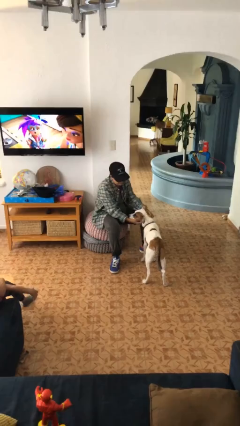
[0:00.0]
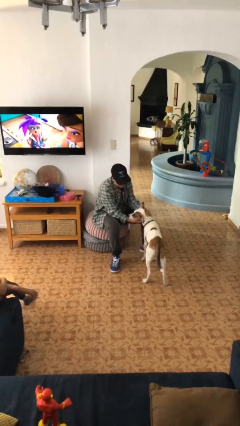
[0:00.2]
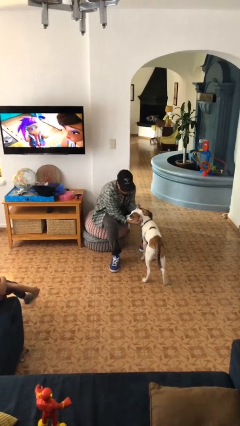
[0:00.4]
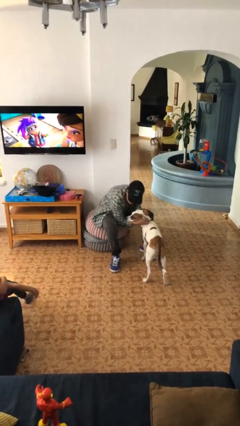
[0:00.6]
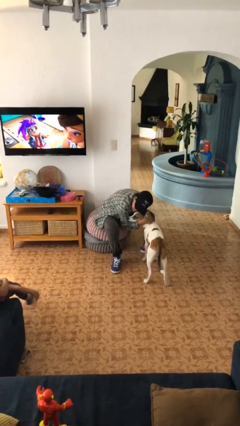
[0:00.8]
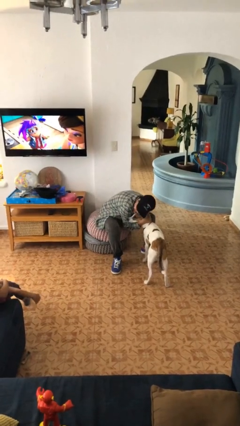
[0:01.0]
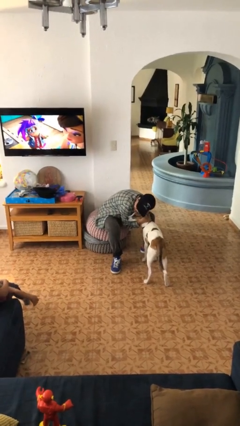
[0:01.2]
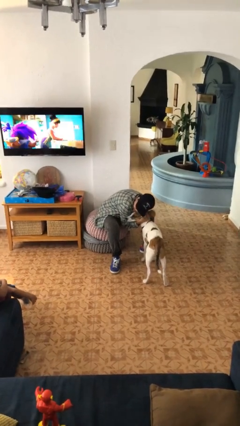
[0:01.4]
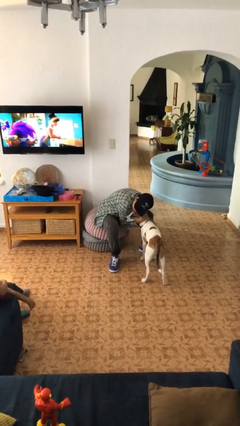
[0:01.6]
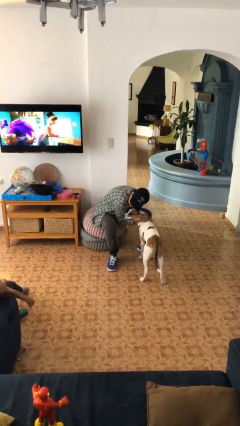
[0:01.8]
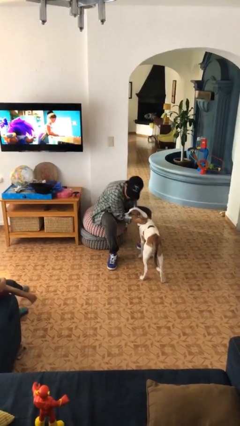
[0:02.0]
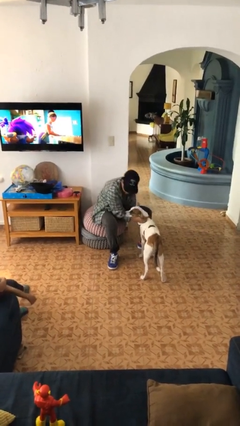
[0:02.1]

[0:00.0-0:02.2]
person hugs cat

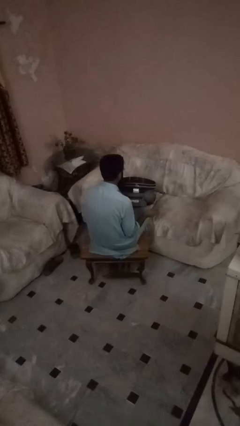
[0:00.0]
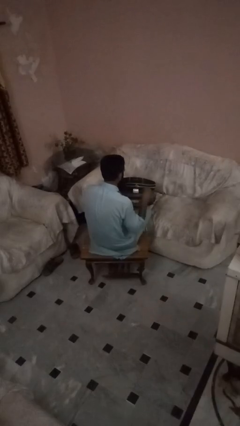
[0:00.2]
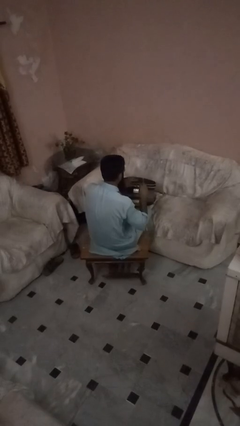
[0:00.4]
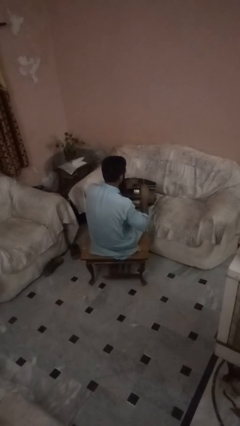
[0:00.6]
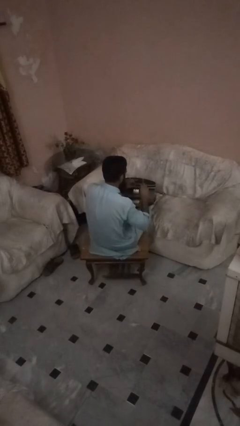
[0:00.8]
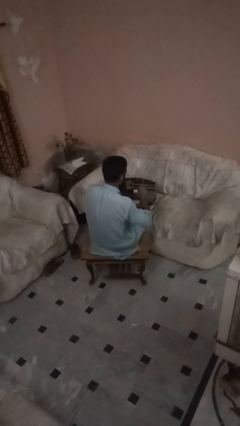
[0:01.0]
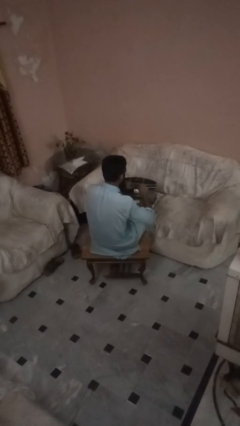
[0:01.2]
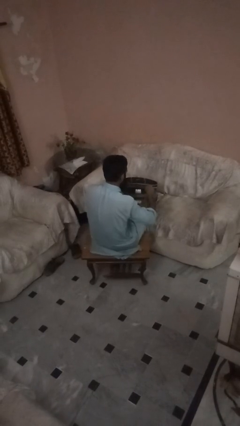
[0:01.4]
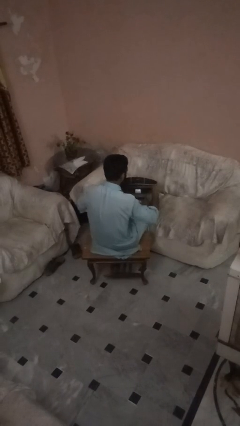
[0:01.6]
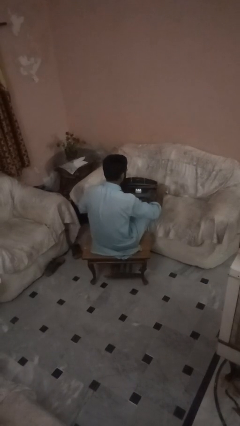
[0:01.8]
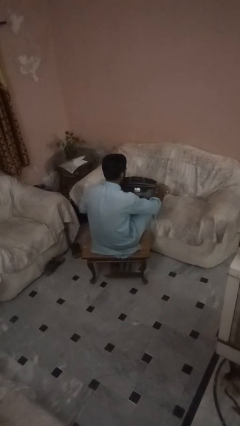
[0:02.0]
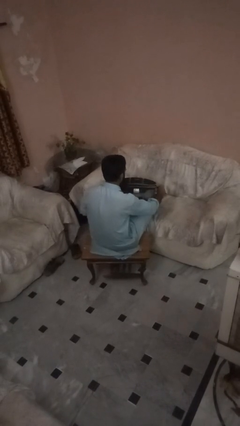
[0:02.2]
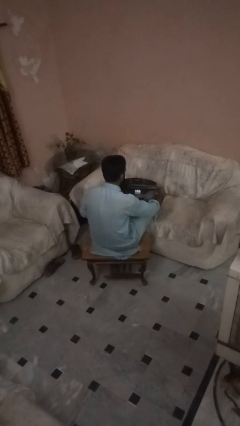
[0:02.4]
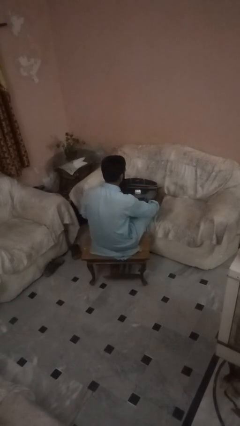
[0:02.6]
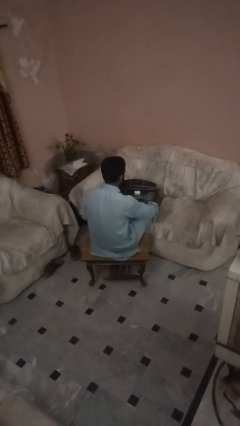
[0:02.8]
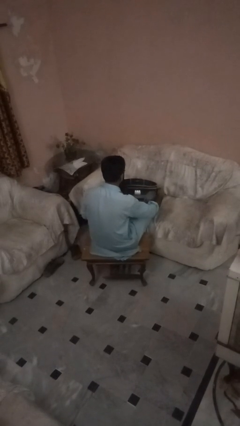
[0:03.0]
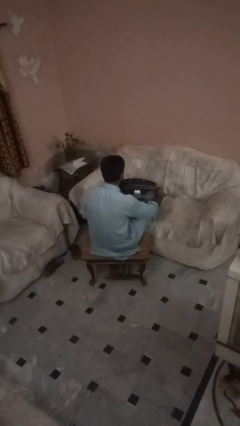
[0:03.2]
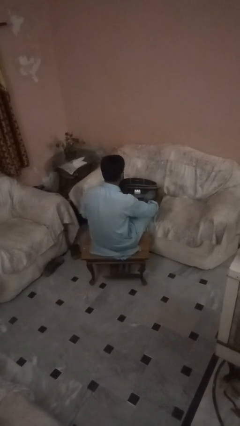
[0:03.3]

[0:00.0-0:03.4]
person opens suitcase

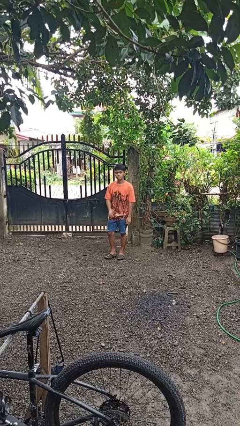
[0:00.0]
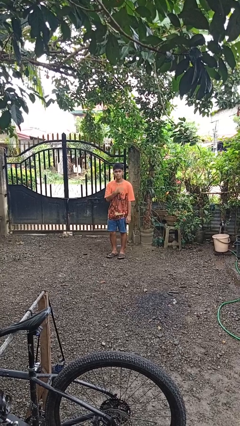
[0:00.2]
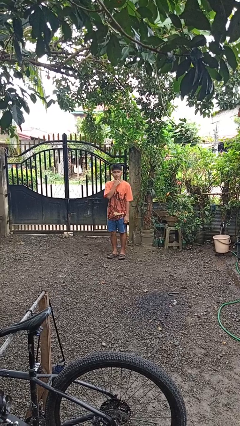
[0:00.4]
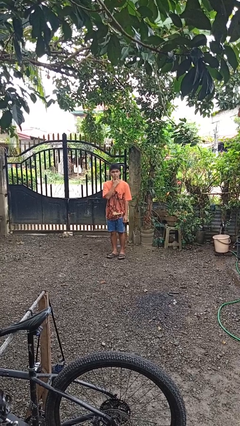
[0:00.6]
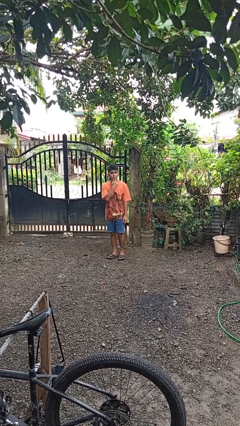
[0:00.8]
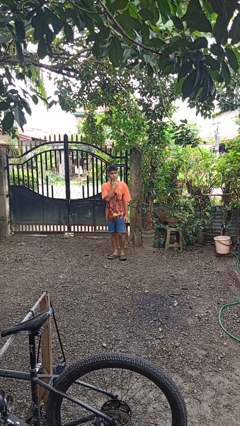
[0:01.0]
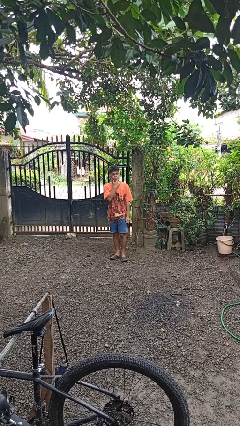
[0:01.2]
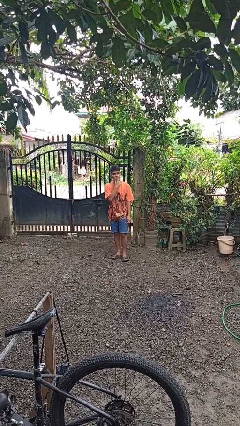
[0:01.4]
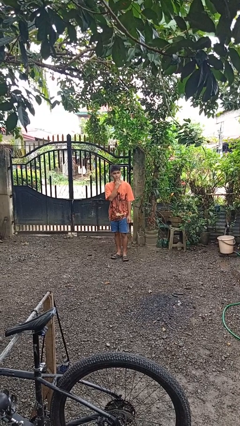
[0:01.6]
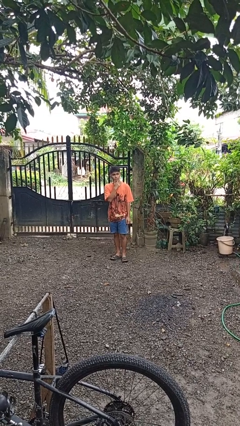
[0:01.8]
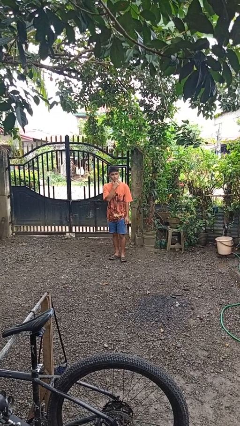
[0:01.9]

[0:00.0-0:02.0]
person strokes chin

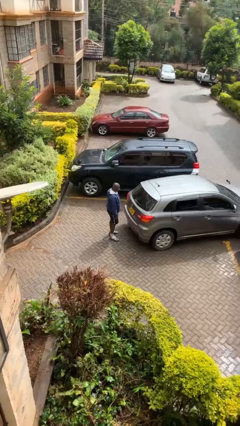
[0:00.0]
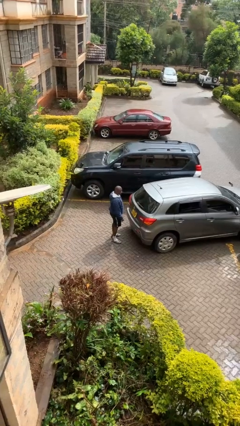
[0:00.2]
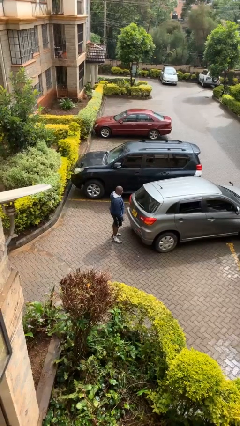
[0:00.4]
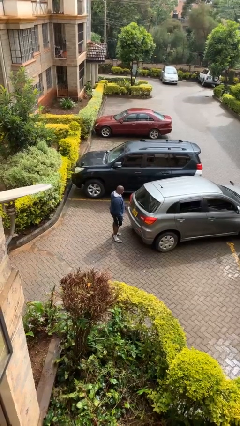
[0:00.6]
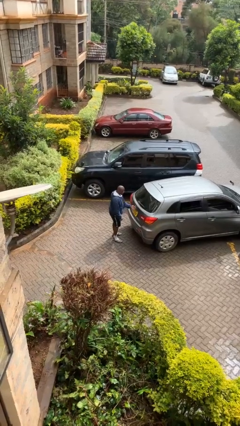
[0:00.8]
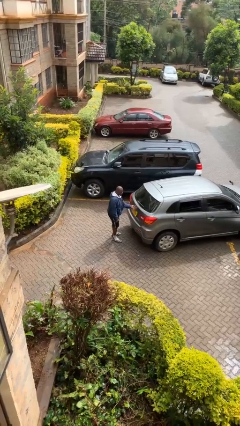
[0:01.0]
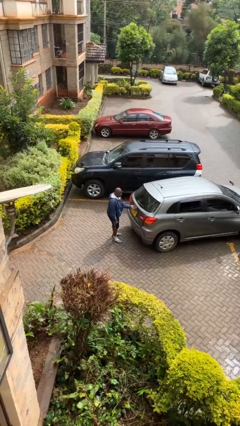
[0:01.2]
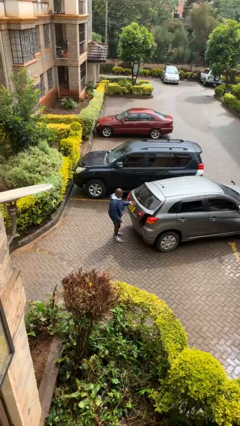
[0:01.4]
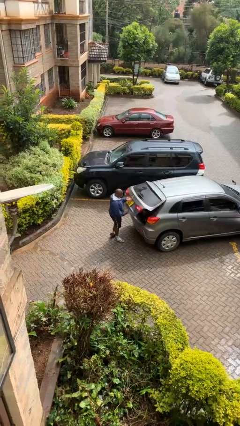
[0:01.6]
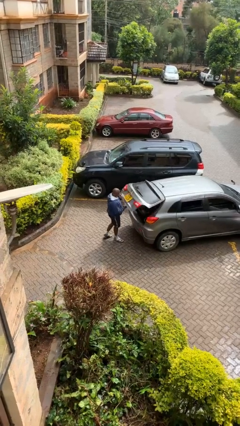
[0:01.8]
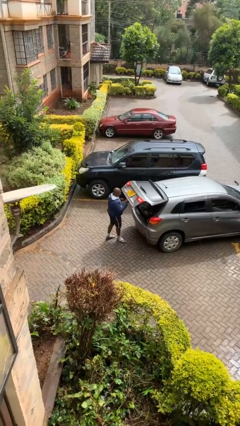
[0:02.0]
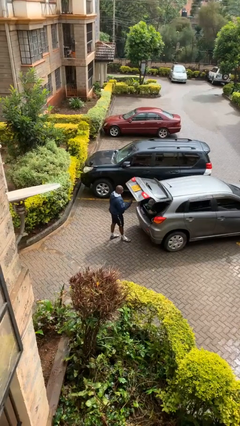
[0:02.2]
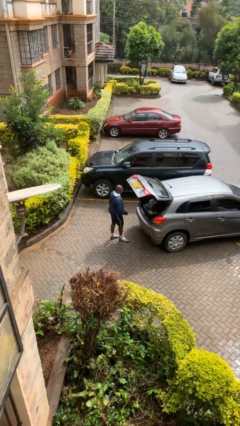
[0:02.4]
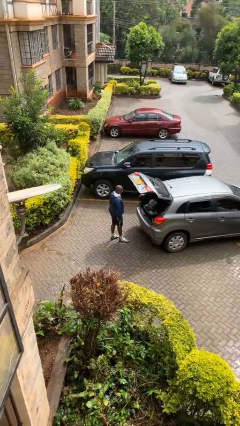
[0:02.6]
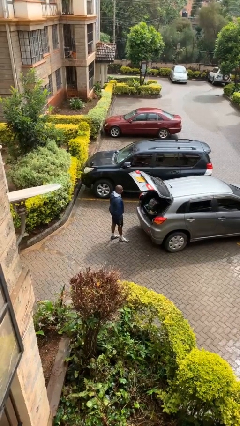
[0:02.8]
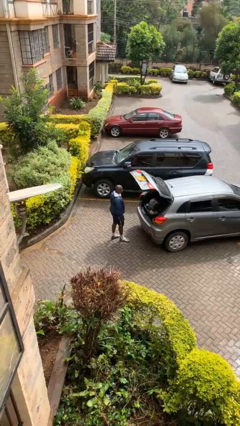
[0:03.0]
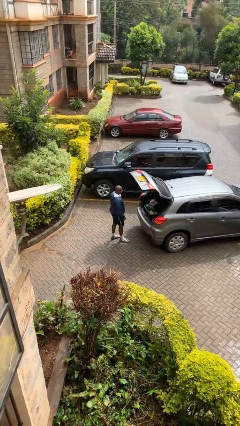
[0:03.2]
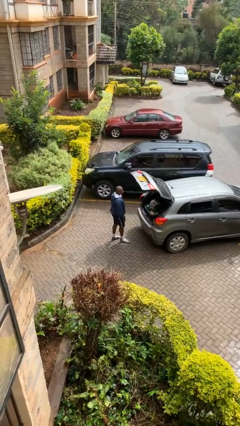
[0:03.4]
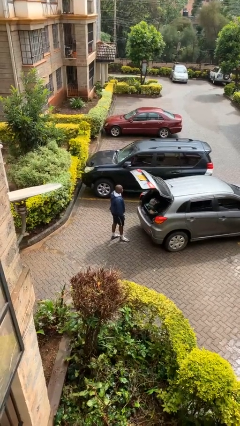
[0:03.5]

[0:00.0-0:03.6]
person opens car trunk

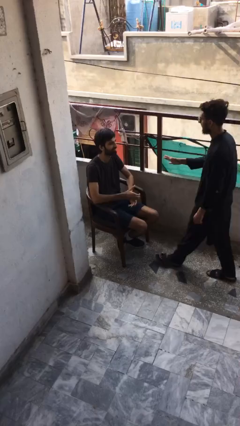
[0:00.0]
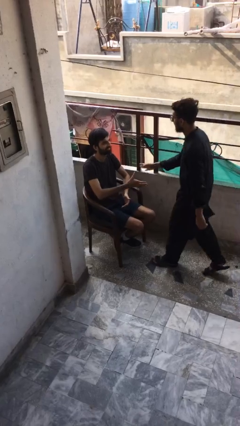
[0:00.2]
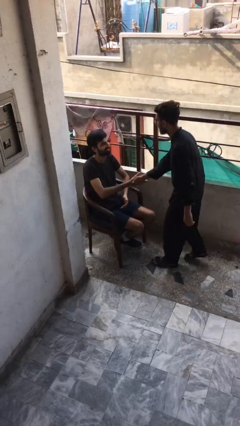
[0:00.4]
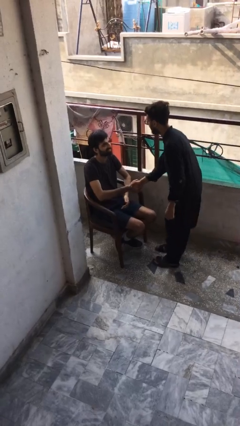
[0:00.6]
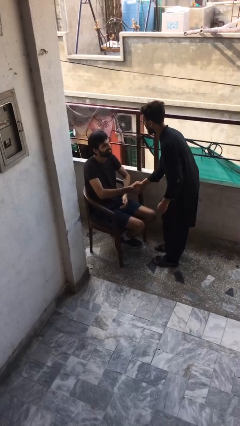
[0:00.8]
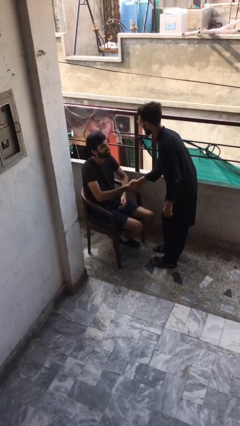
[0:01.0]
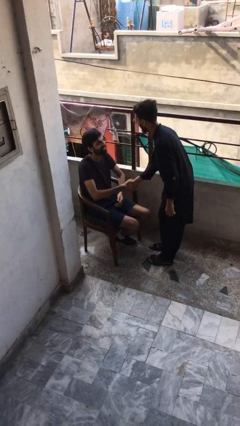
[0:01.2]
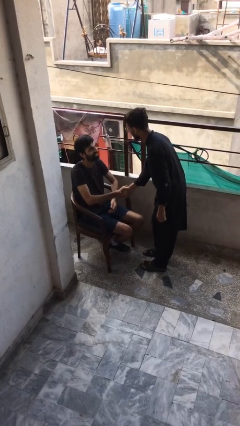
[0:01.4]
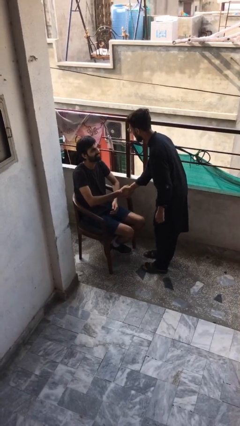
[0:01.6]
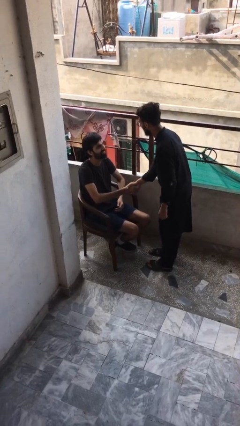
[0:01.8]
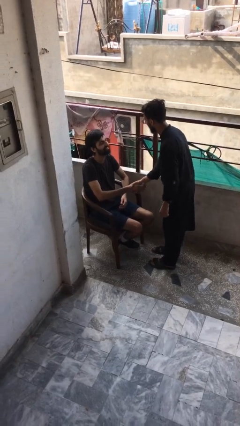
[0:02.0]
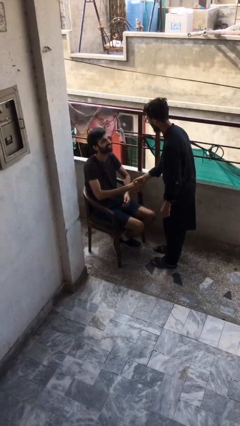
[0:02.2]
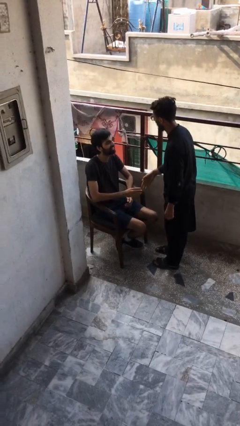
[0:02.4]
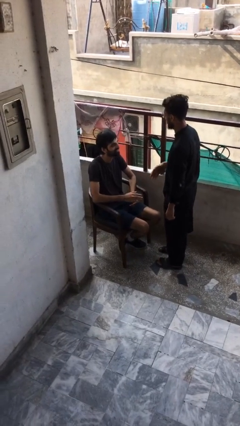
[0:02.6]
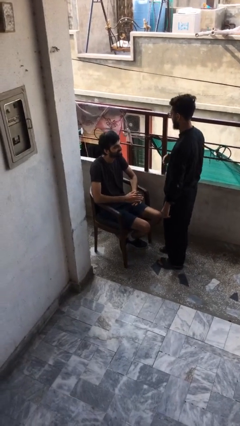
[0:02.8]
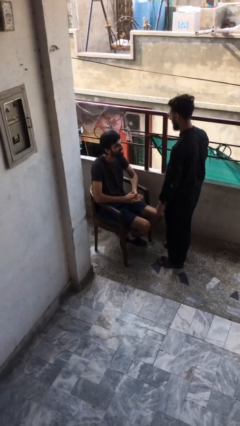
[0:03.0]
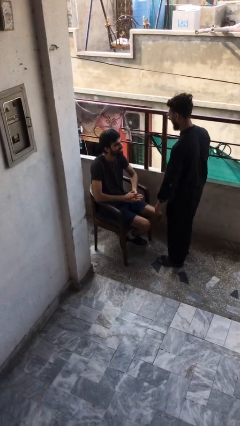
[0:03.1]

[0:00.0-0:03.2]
person shakes hand

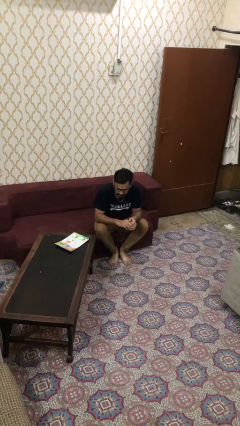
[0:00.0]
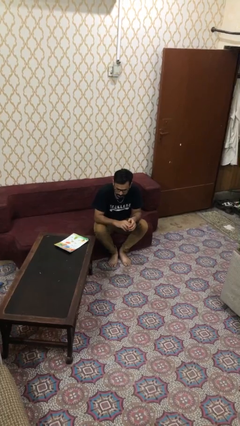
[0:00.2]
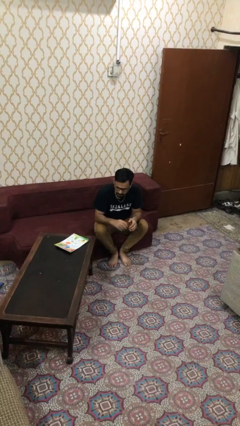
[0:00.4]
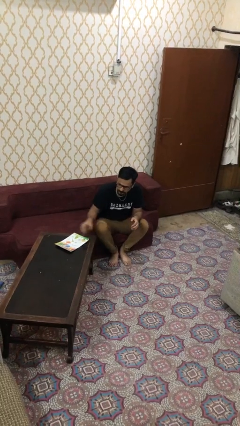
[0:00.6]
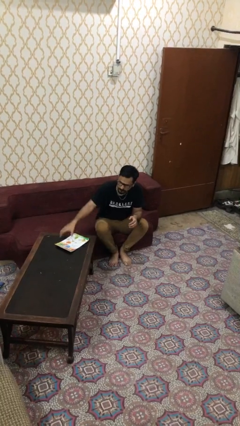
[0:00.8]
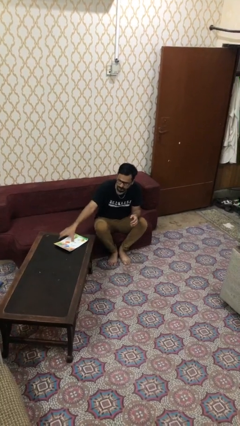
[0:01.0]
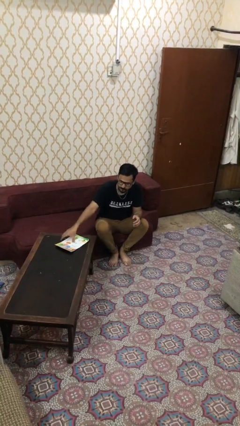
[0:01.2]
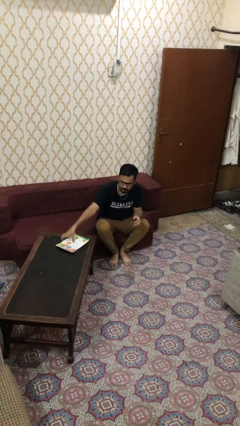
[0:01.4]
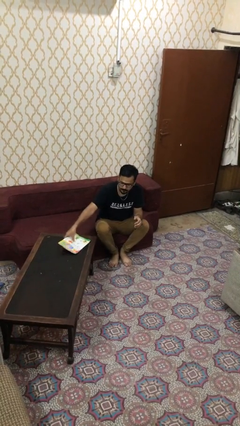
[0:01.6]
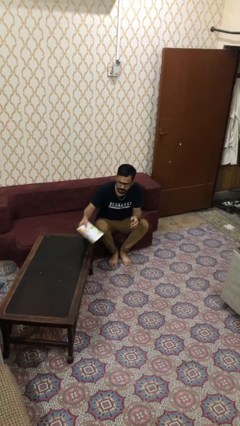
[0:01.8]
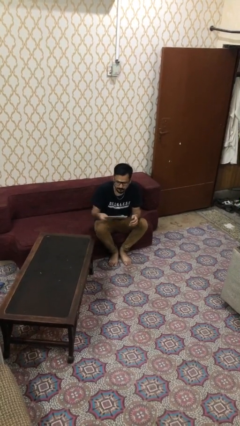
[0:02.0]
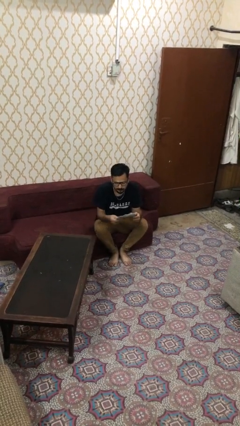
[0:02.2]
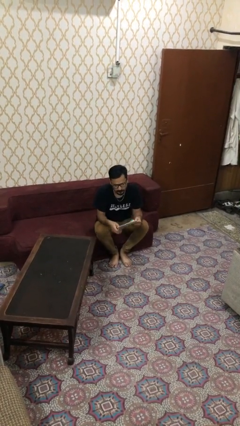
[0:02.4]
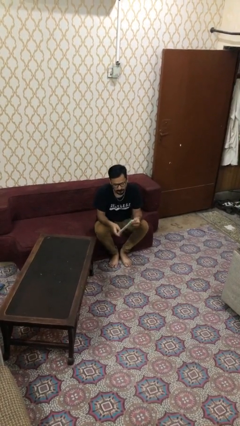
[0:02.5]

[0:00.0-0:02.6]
person picks up object from table
